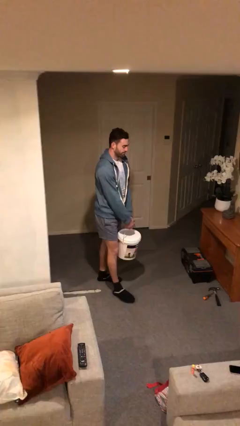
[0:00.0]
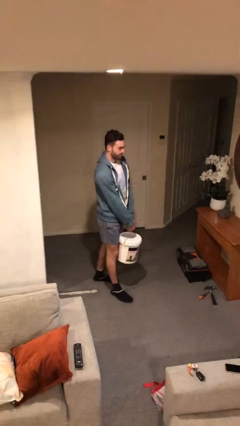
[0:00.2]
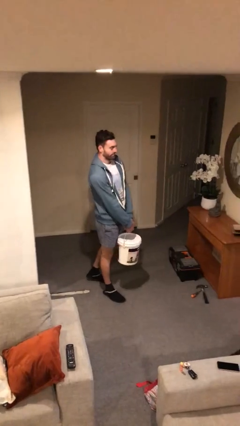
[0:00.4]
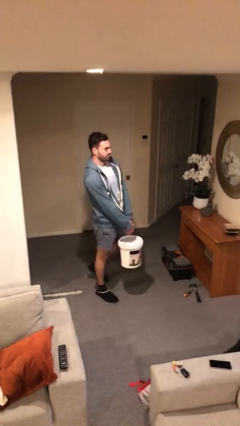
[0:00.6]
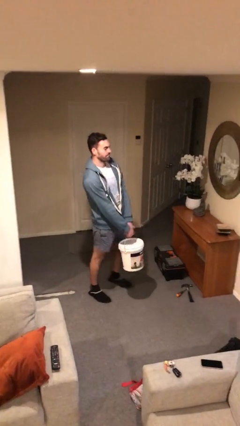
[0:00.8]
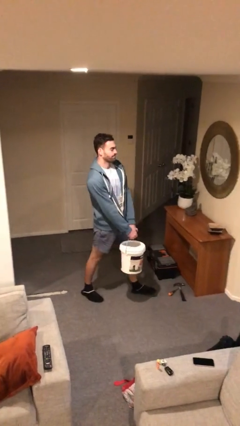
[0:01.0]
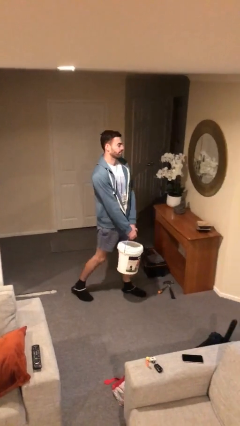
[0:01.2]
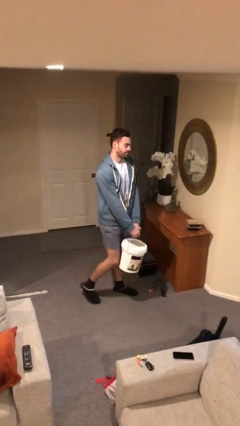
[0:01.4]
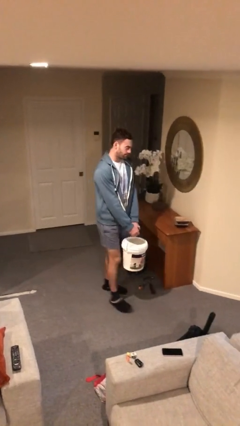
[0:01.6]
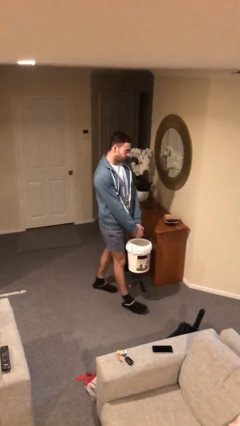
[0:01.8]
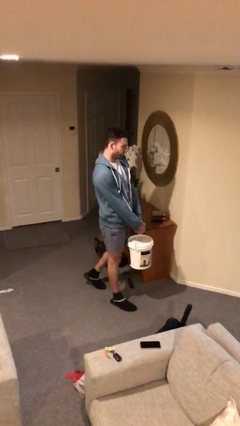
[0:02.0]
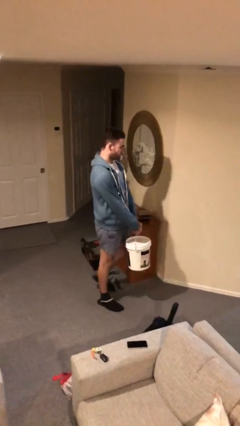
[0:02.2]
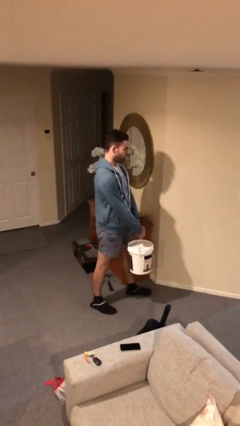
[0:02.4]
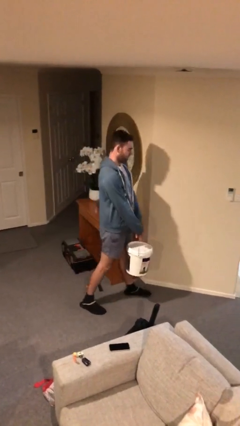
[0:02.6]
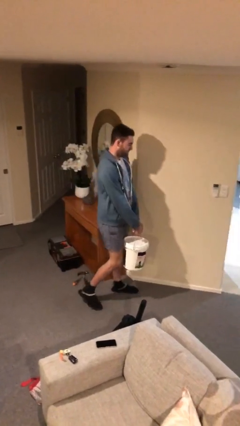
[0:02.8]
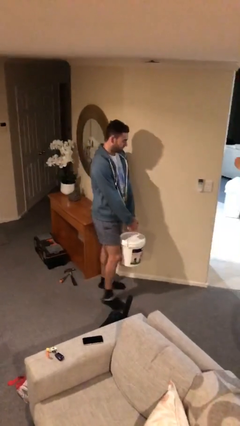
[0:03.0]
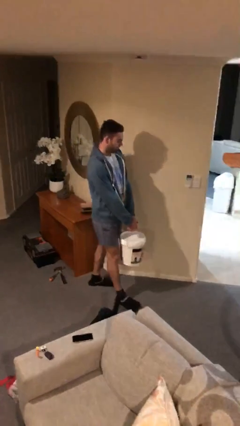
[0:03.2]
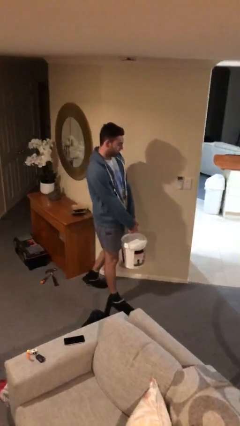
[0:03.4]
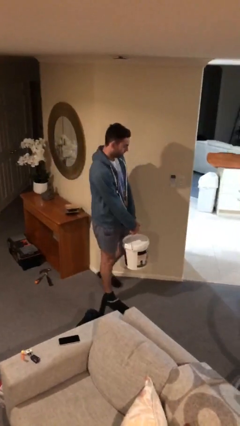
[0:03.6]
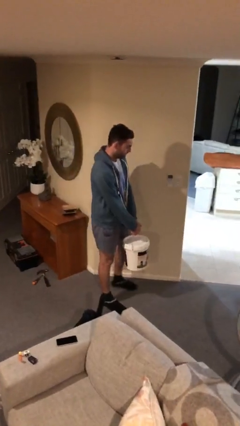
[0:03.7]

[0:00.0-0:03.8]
person carries heavy object

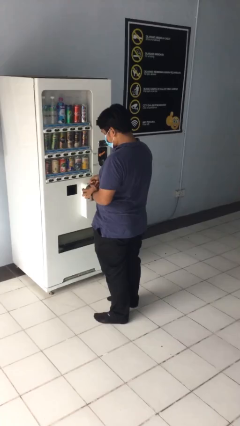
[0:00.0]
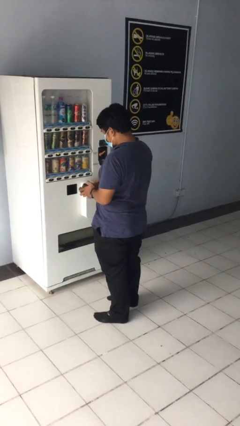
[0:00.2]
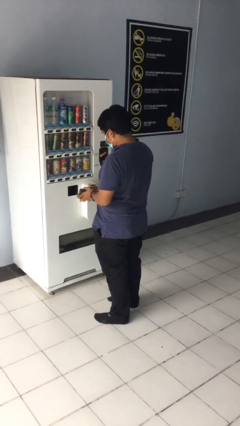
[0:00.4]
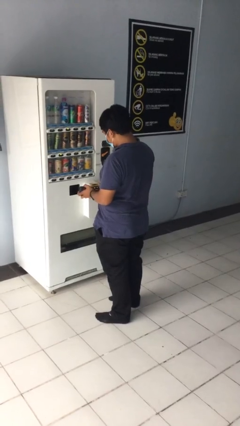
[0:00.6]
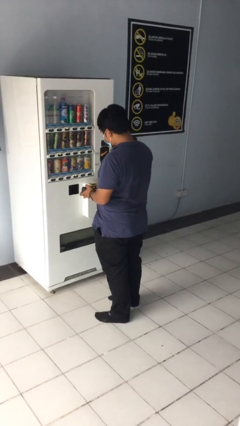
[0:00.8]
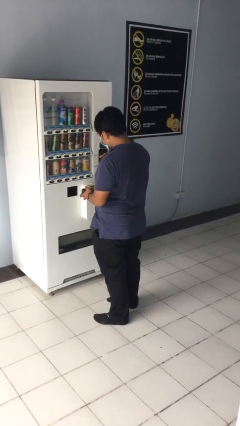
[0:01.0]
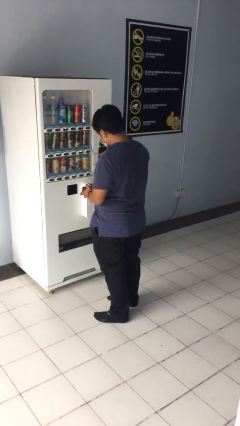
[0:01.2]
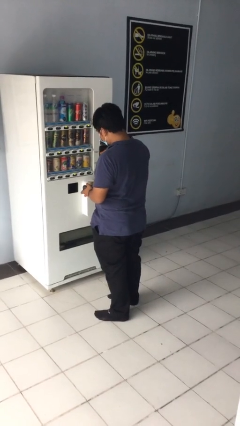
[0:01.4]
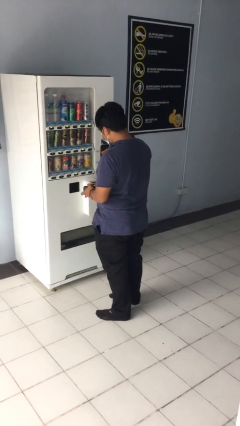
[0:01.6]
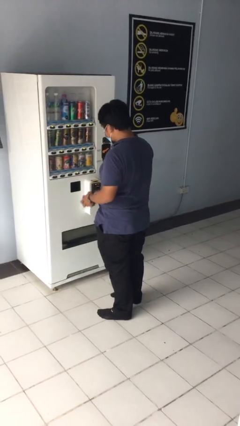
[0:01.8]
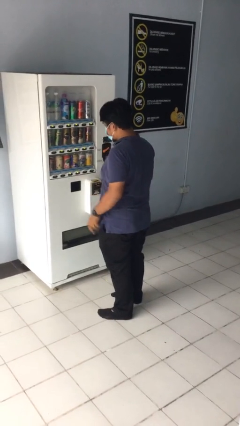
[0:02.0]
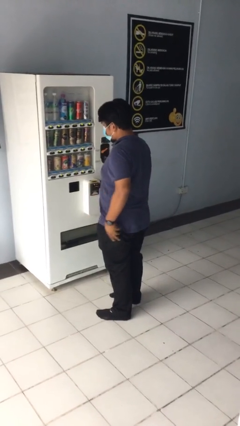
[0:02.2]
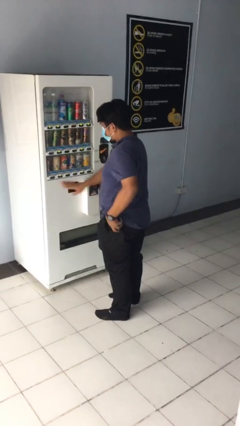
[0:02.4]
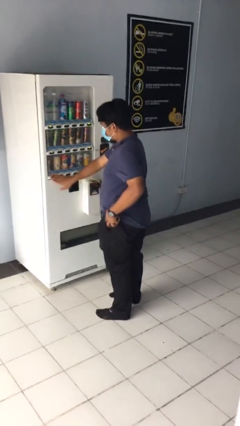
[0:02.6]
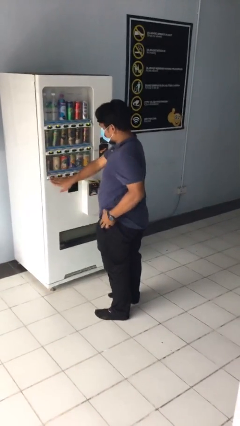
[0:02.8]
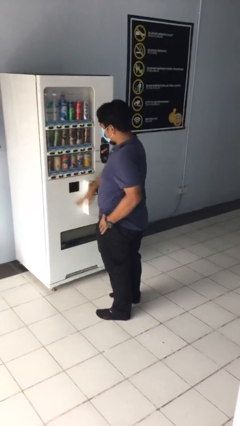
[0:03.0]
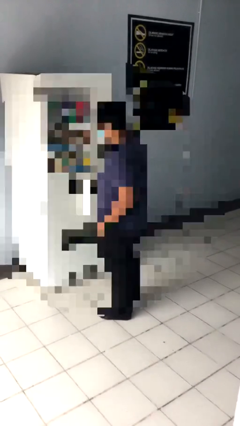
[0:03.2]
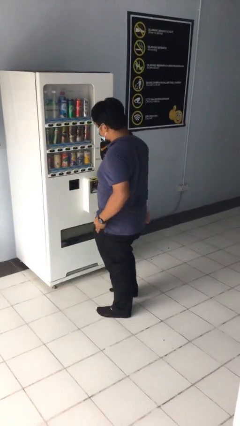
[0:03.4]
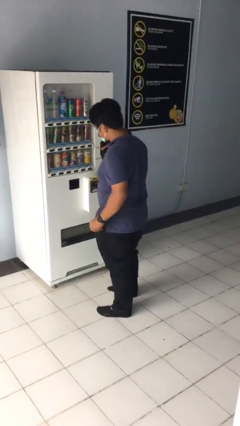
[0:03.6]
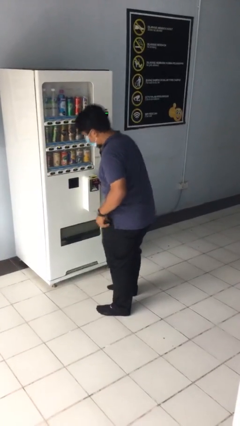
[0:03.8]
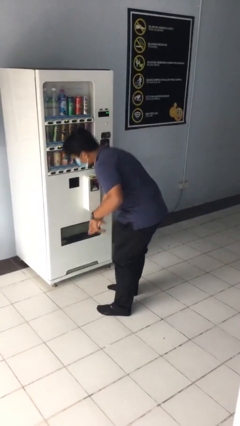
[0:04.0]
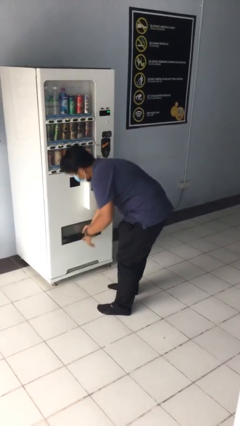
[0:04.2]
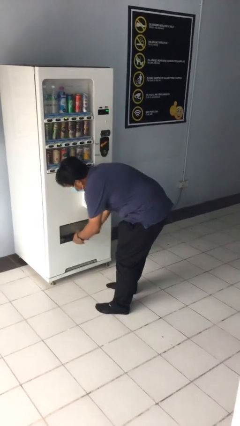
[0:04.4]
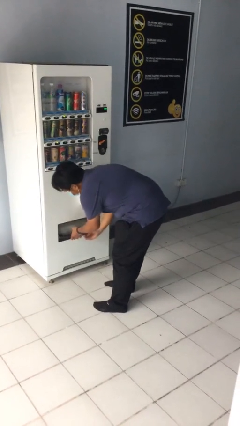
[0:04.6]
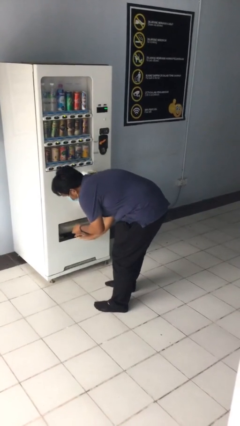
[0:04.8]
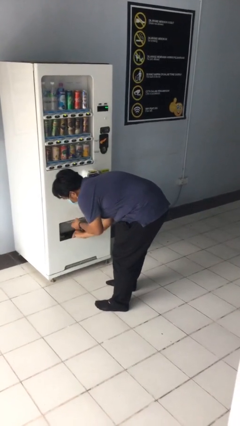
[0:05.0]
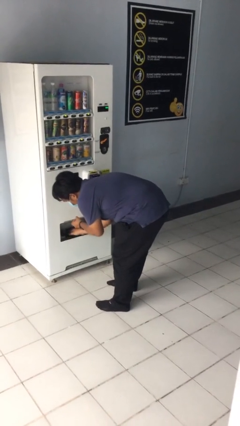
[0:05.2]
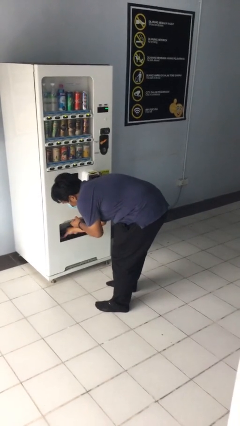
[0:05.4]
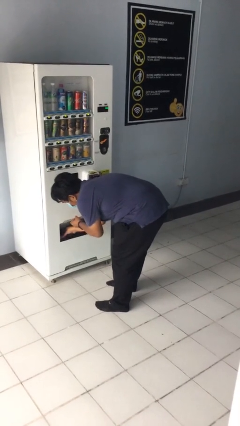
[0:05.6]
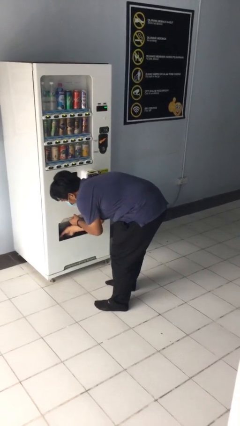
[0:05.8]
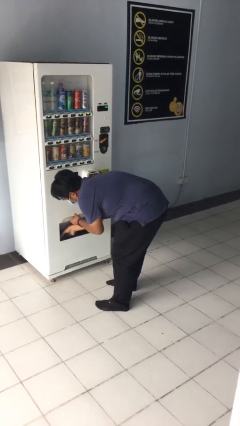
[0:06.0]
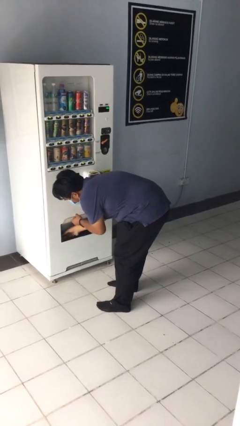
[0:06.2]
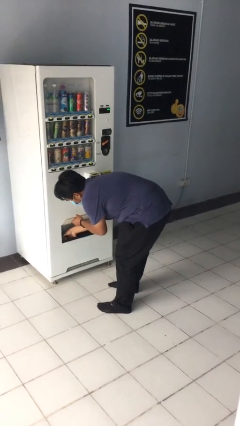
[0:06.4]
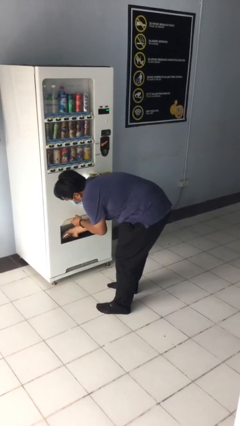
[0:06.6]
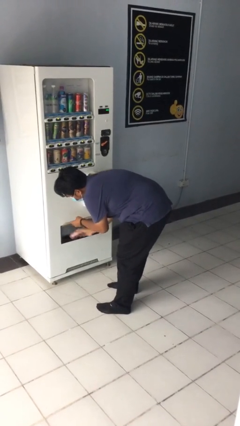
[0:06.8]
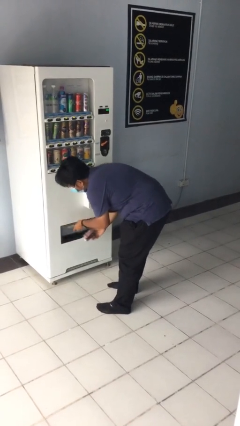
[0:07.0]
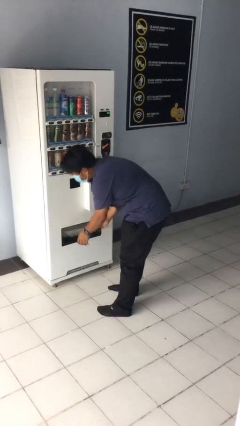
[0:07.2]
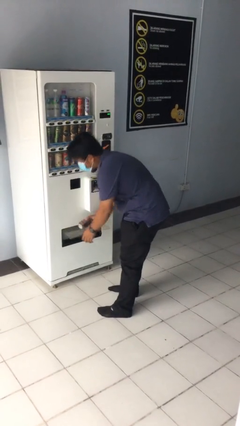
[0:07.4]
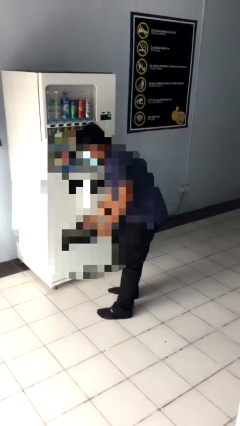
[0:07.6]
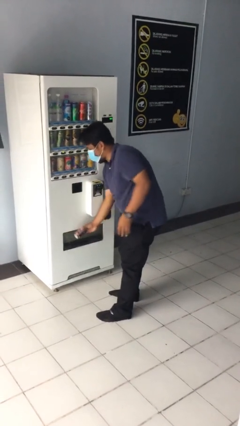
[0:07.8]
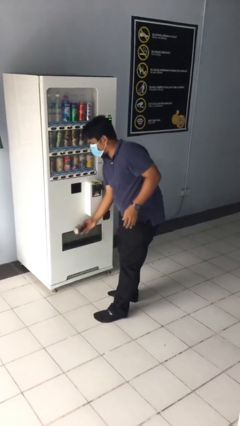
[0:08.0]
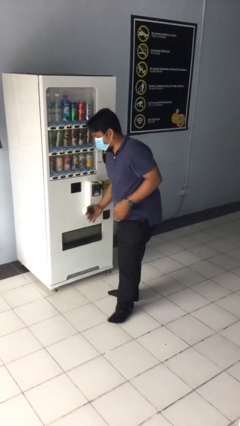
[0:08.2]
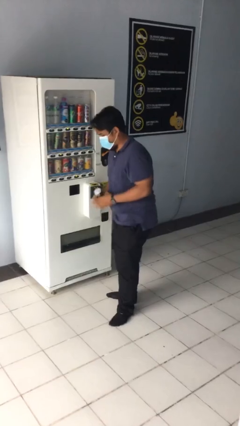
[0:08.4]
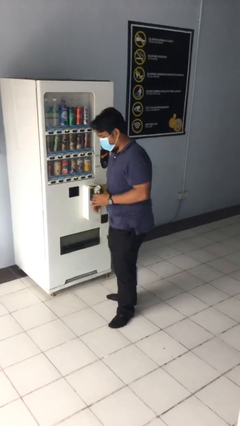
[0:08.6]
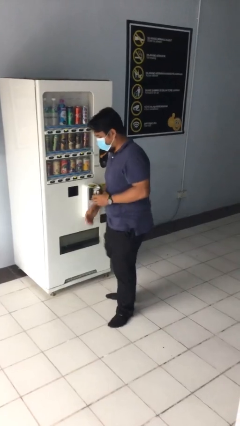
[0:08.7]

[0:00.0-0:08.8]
person purchases from machine

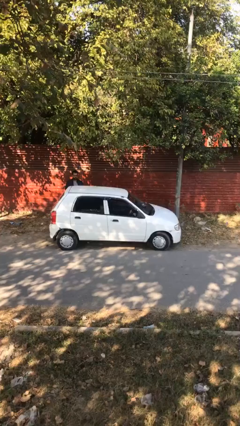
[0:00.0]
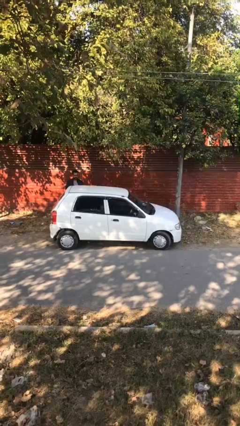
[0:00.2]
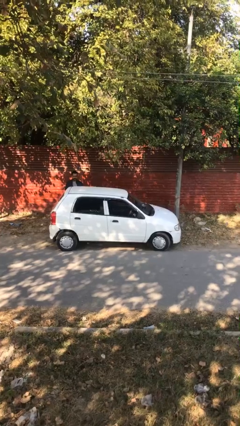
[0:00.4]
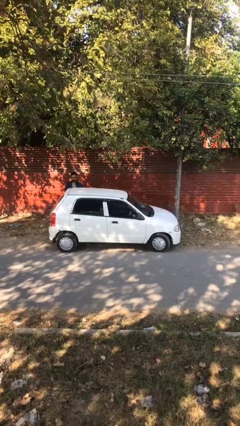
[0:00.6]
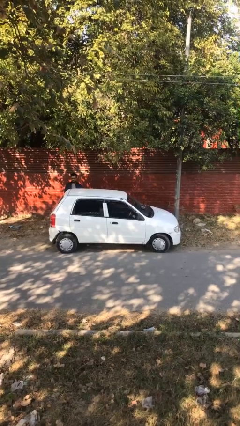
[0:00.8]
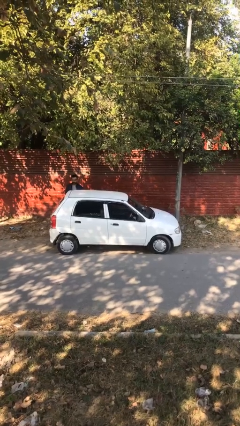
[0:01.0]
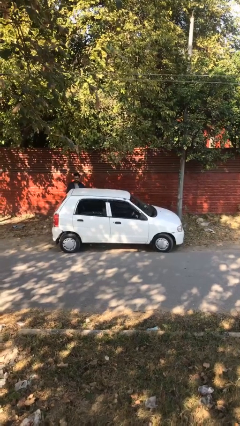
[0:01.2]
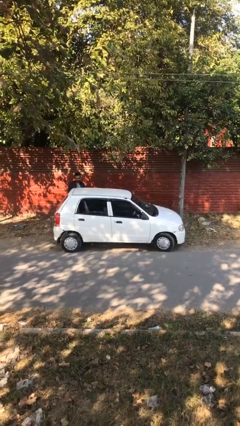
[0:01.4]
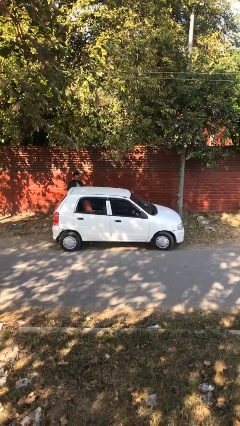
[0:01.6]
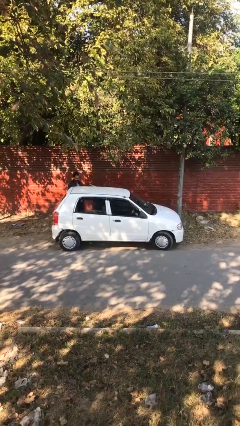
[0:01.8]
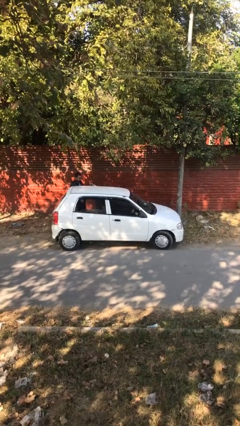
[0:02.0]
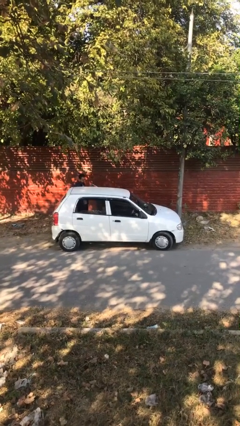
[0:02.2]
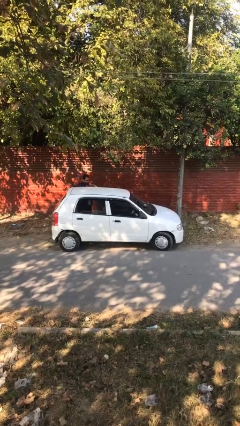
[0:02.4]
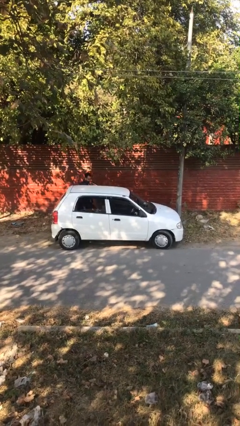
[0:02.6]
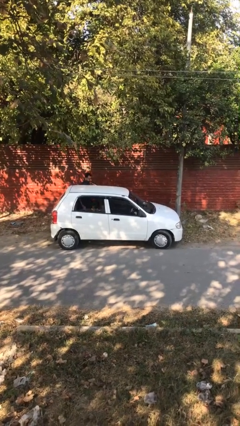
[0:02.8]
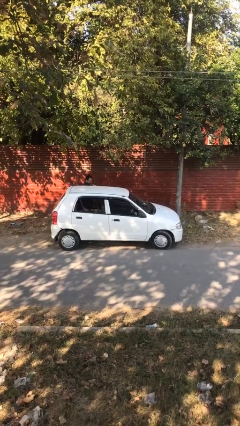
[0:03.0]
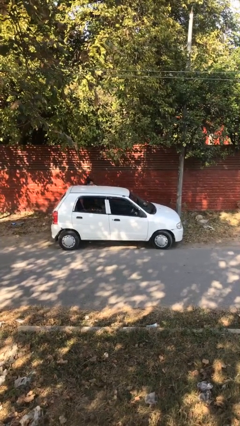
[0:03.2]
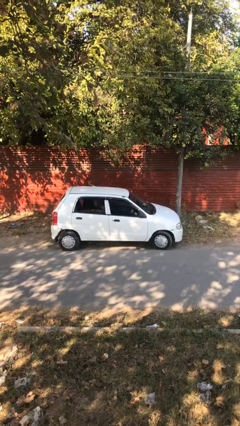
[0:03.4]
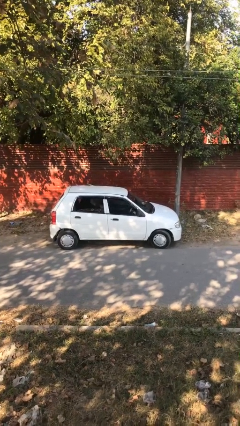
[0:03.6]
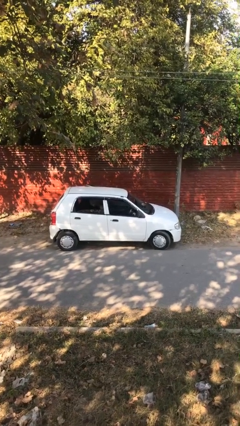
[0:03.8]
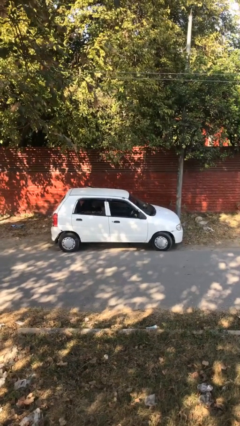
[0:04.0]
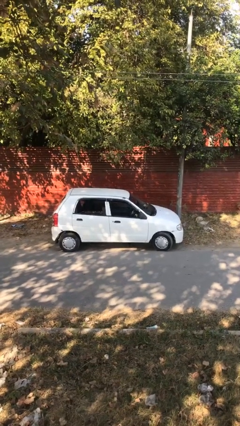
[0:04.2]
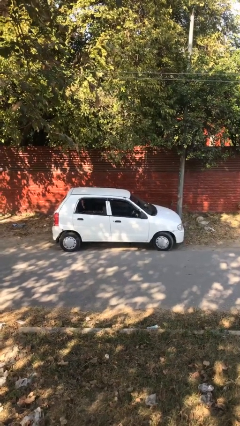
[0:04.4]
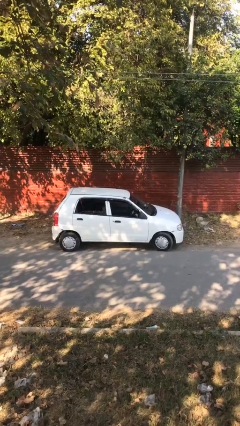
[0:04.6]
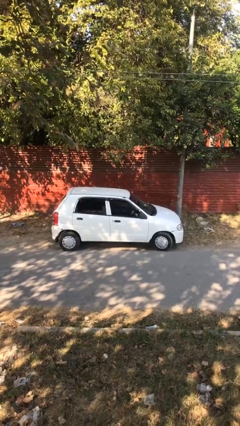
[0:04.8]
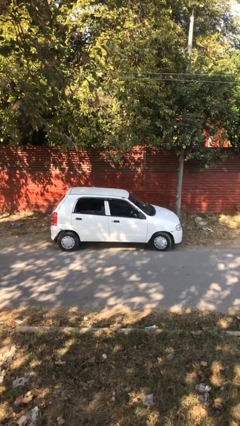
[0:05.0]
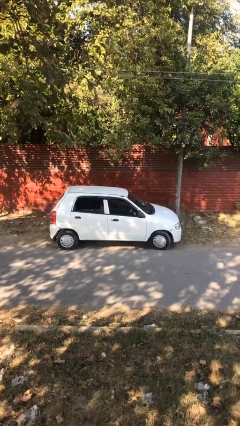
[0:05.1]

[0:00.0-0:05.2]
car picks up person
